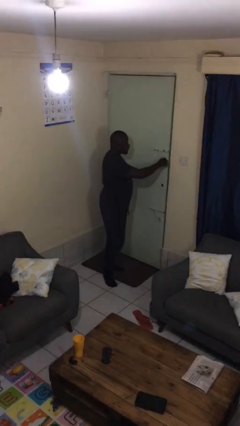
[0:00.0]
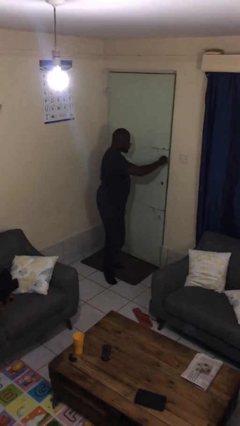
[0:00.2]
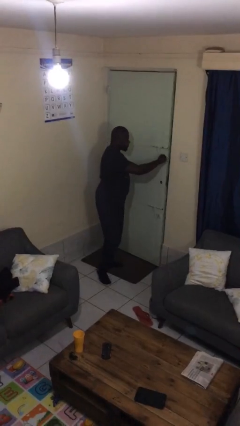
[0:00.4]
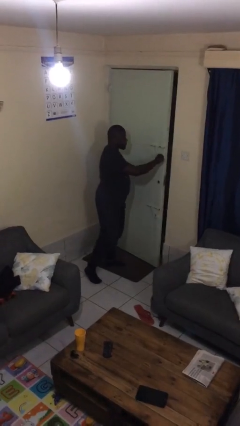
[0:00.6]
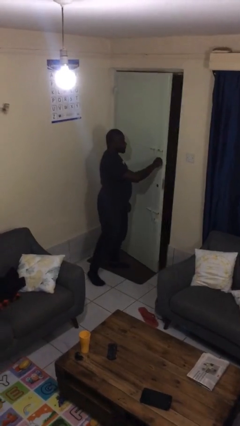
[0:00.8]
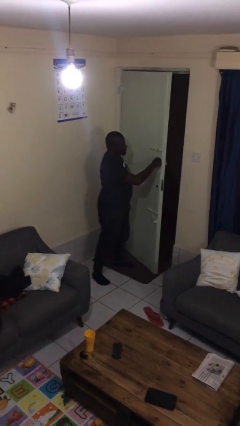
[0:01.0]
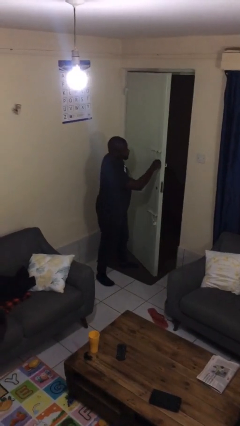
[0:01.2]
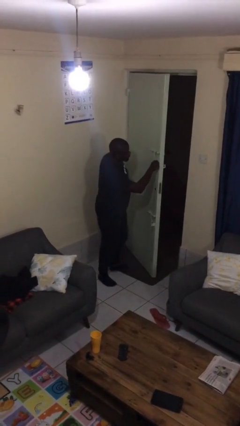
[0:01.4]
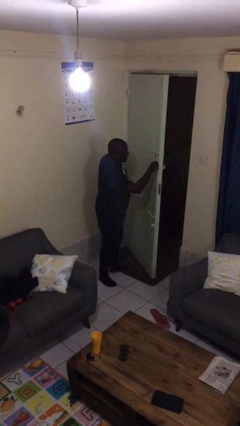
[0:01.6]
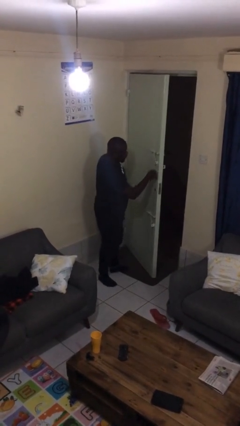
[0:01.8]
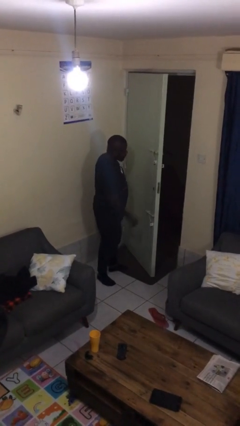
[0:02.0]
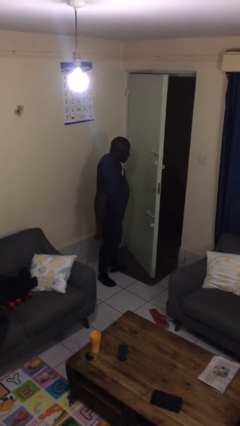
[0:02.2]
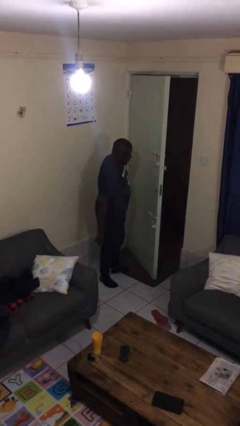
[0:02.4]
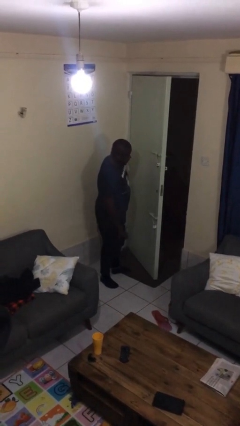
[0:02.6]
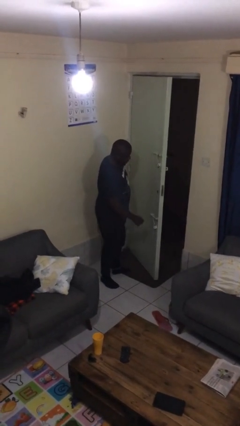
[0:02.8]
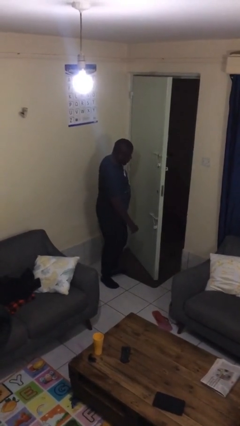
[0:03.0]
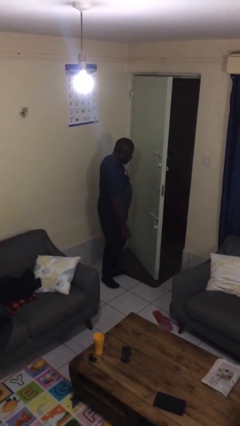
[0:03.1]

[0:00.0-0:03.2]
person opens facility door

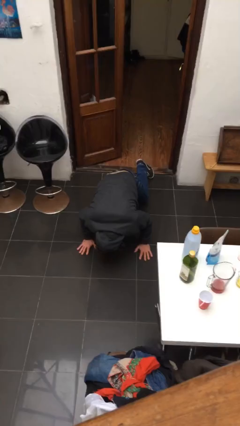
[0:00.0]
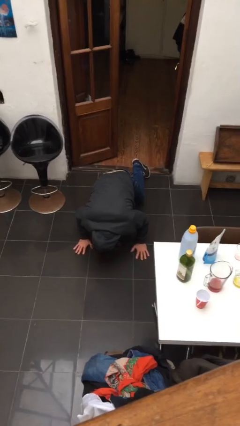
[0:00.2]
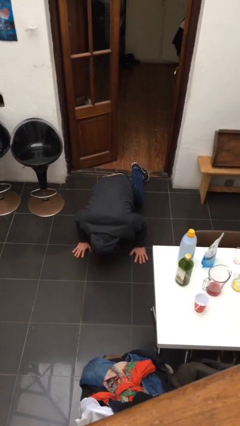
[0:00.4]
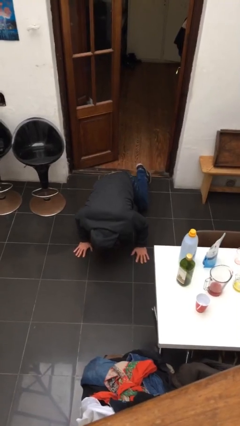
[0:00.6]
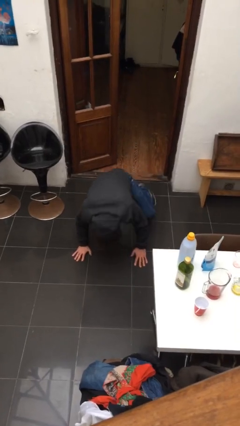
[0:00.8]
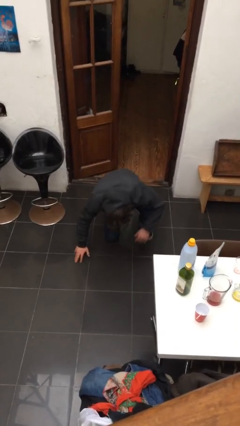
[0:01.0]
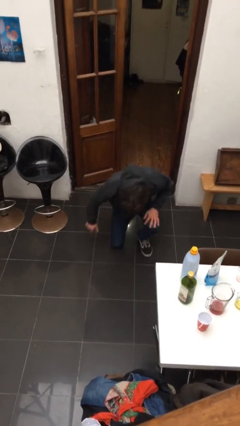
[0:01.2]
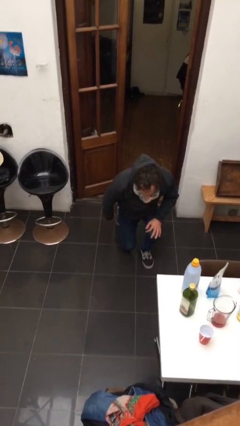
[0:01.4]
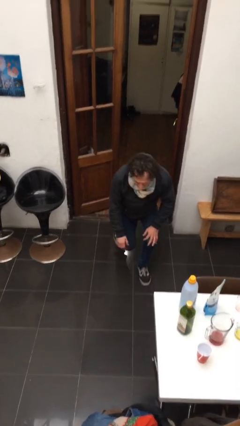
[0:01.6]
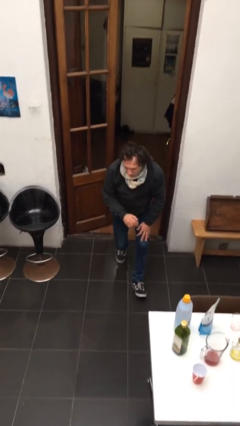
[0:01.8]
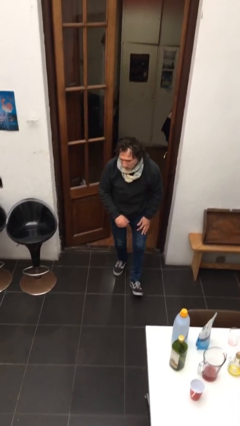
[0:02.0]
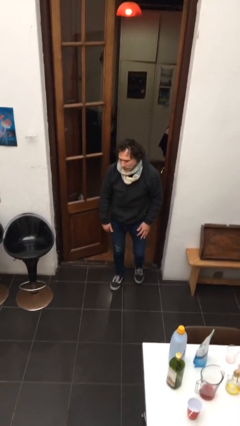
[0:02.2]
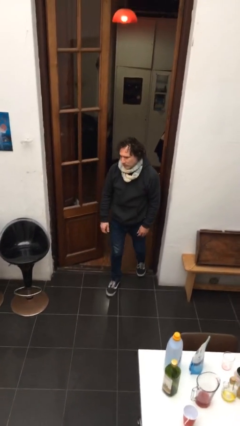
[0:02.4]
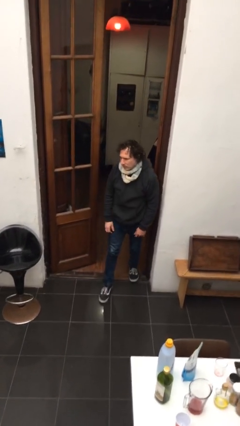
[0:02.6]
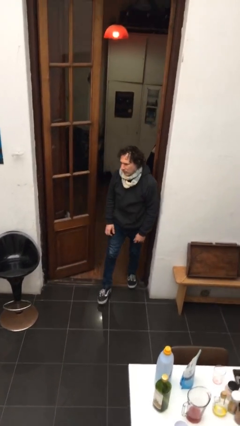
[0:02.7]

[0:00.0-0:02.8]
person stands up from floor

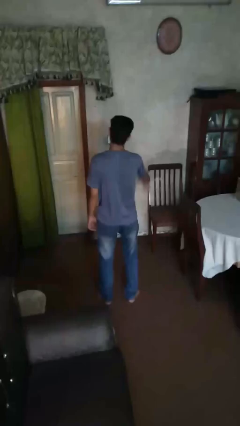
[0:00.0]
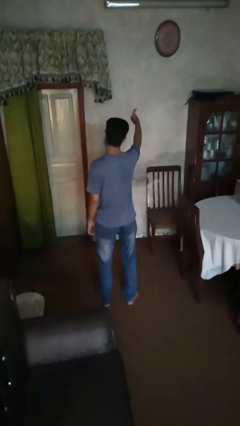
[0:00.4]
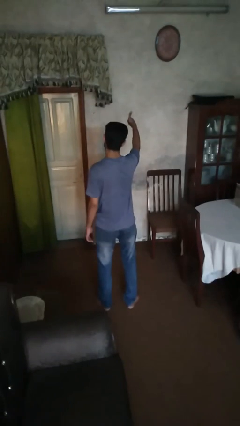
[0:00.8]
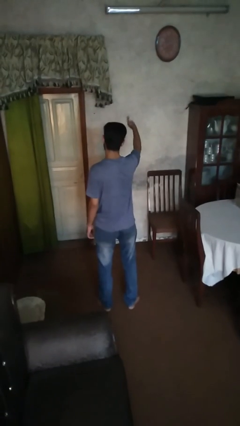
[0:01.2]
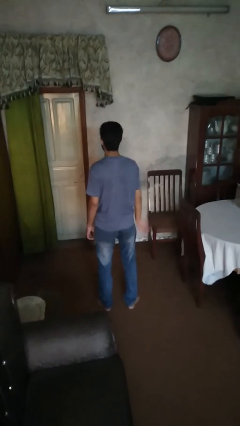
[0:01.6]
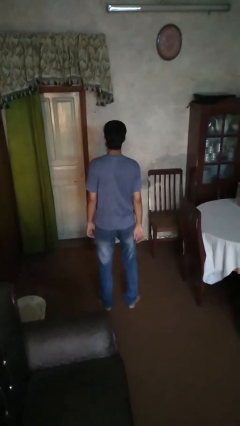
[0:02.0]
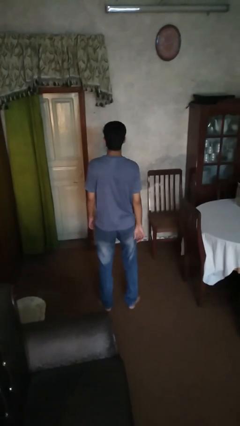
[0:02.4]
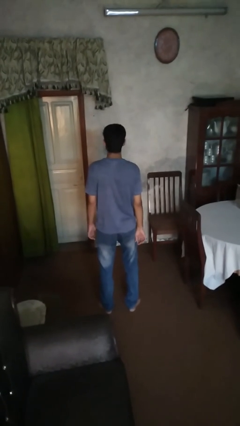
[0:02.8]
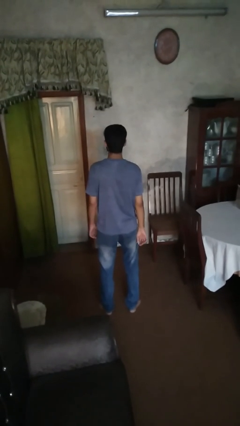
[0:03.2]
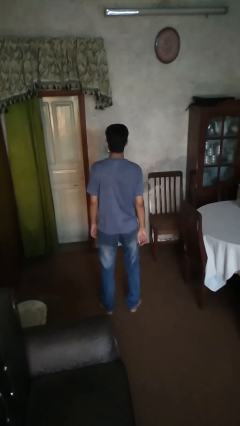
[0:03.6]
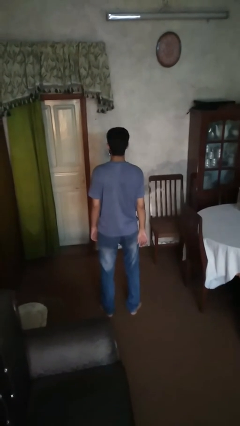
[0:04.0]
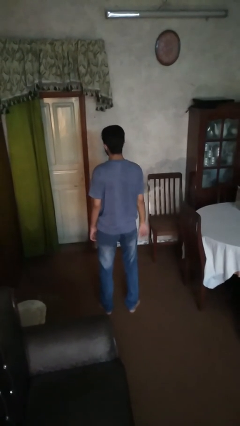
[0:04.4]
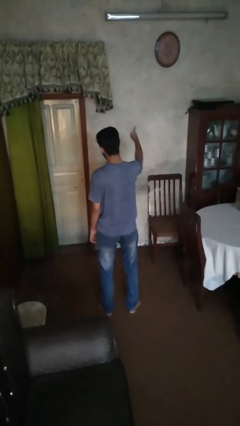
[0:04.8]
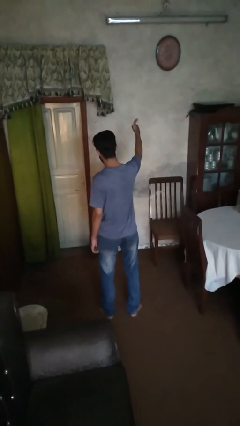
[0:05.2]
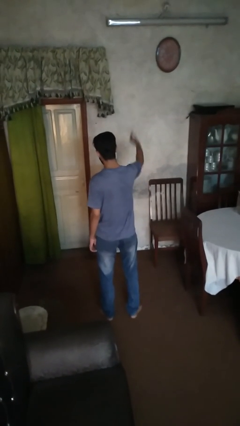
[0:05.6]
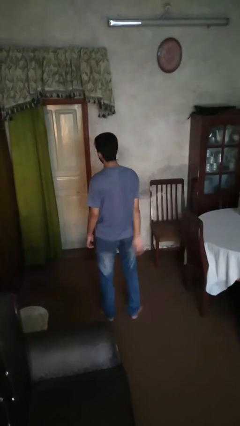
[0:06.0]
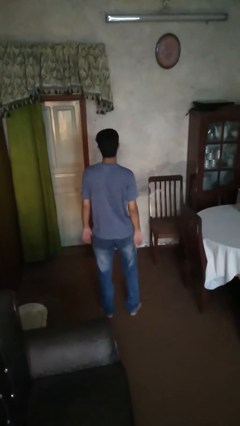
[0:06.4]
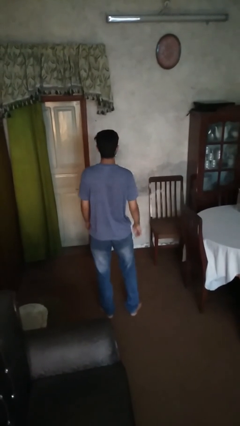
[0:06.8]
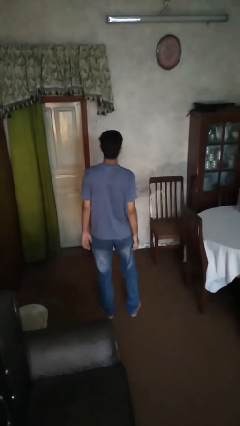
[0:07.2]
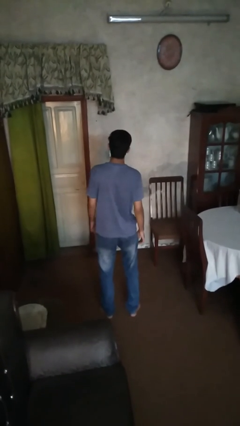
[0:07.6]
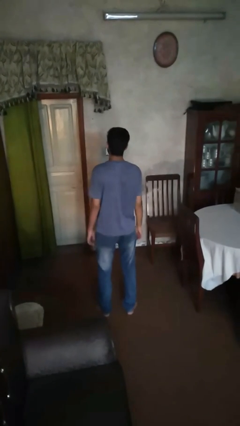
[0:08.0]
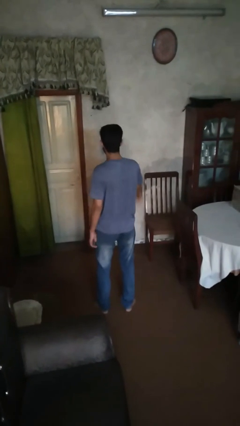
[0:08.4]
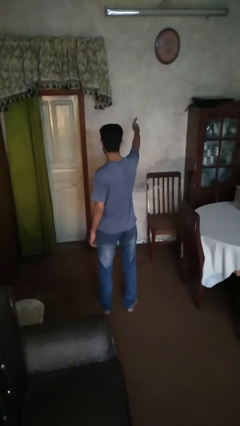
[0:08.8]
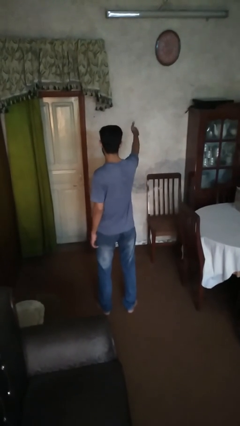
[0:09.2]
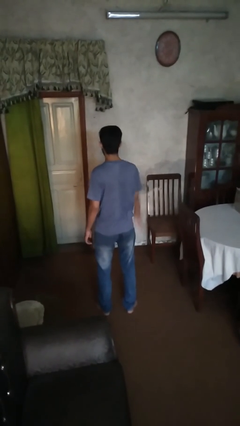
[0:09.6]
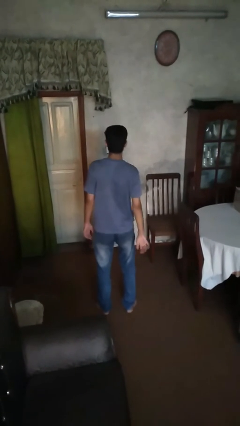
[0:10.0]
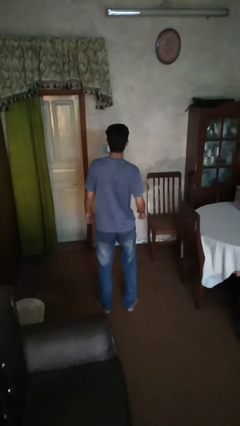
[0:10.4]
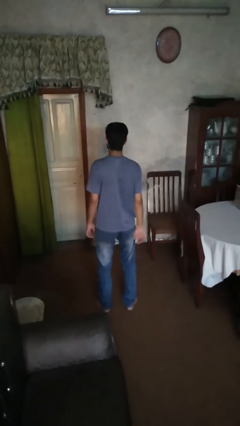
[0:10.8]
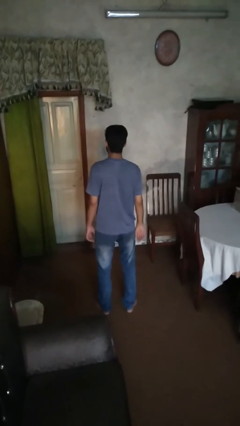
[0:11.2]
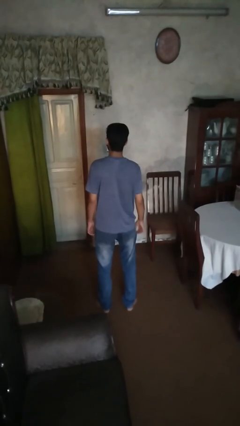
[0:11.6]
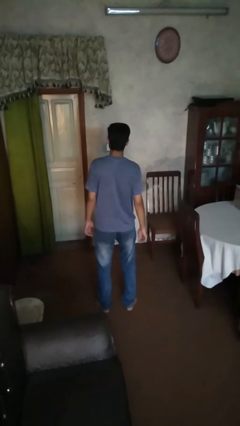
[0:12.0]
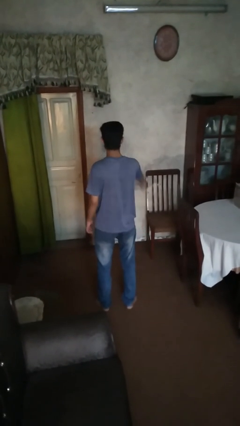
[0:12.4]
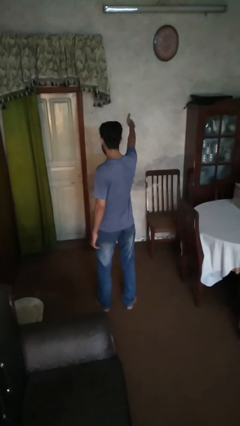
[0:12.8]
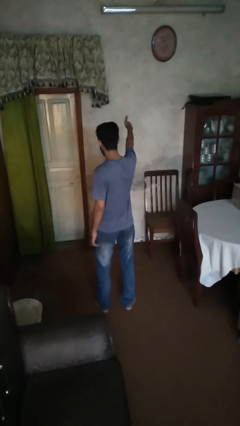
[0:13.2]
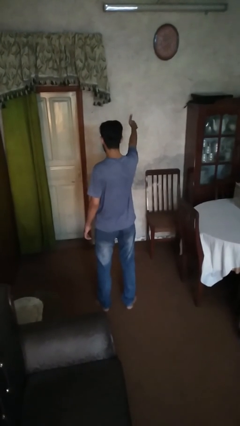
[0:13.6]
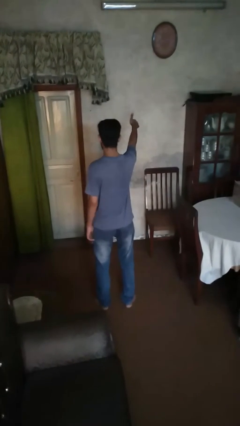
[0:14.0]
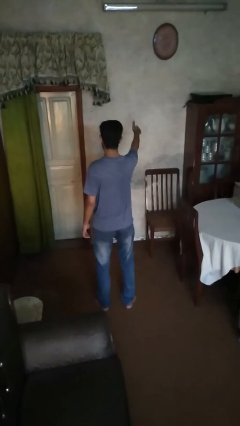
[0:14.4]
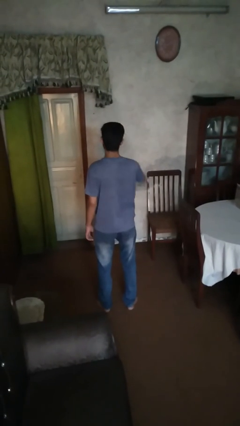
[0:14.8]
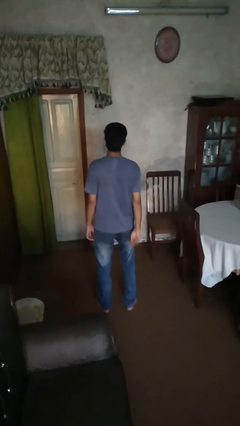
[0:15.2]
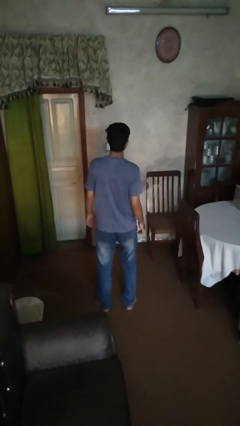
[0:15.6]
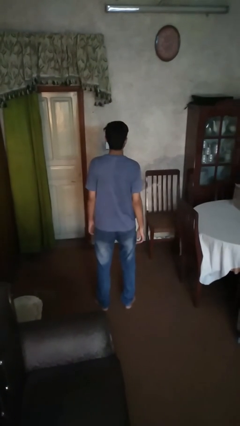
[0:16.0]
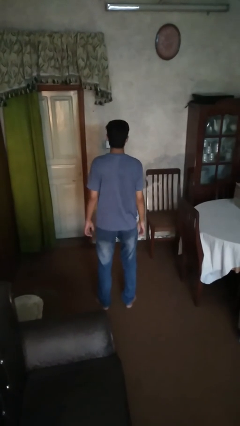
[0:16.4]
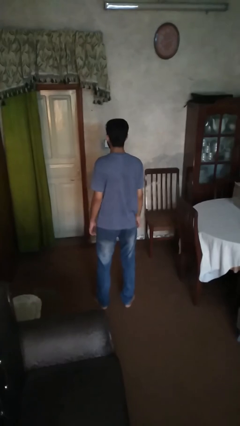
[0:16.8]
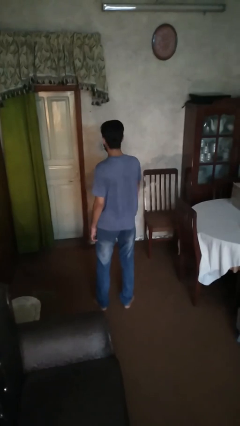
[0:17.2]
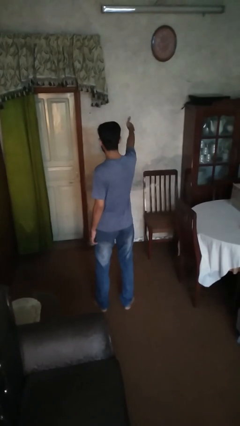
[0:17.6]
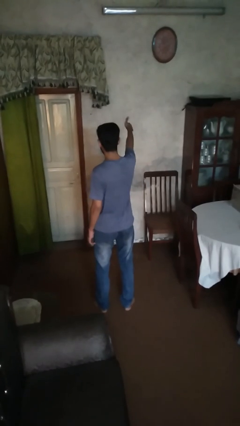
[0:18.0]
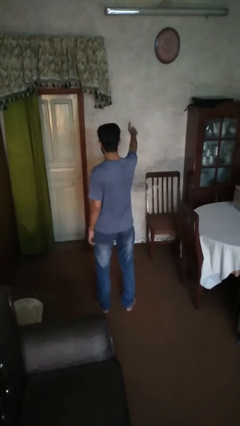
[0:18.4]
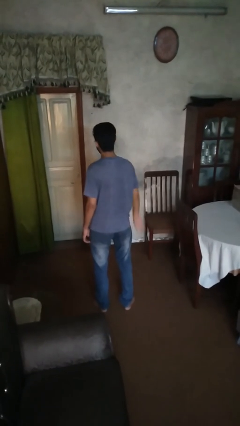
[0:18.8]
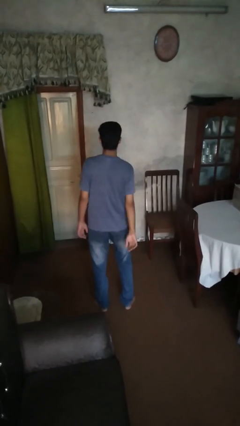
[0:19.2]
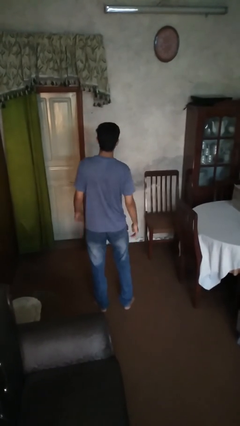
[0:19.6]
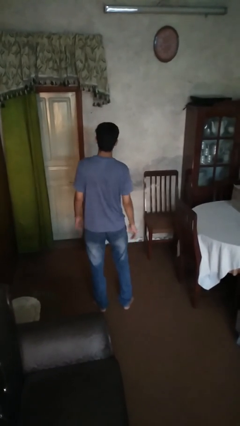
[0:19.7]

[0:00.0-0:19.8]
person gestures thumbs up

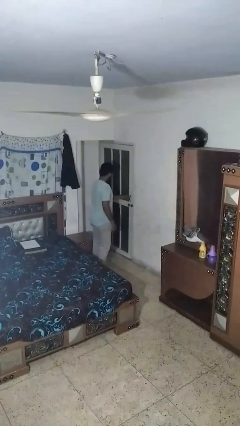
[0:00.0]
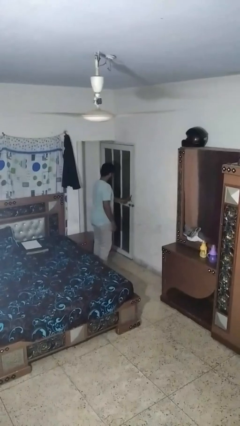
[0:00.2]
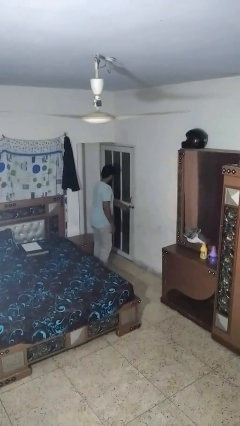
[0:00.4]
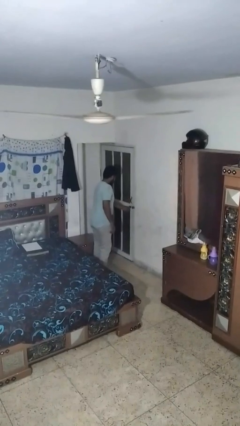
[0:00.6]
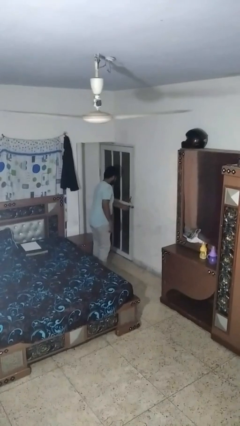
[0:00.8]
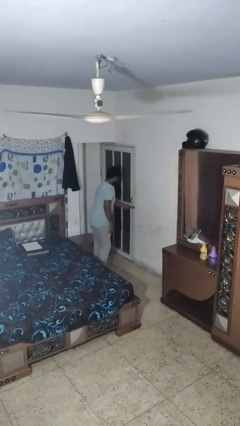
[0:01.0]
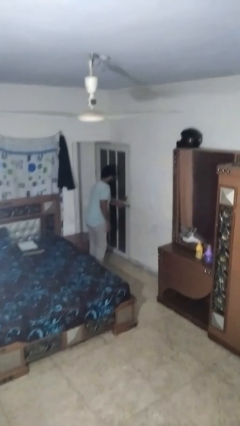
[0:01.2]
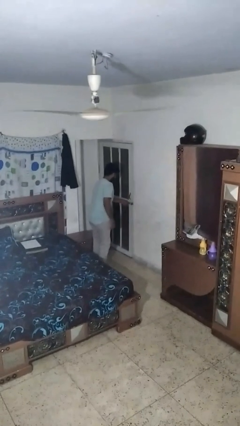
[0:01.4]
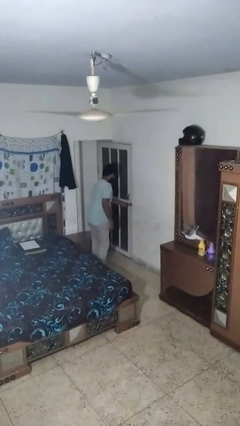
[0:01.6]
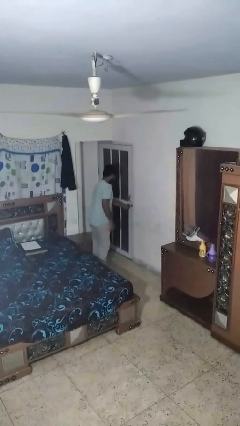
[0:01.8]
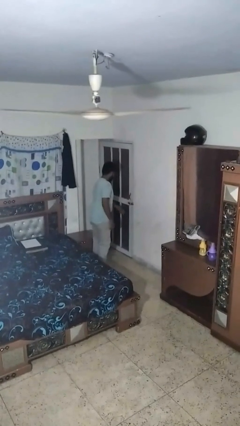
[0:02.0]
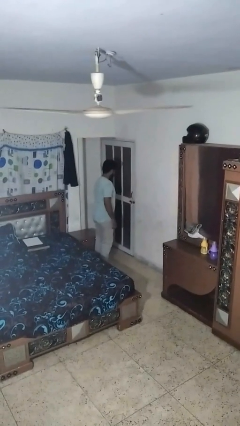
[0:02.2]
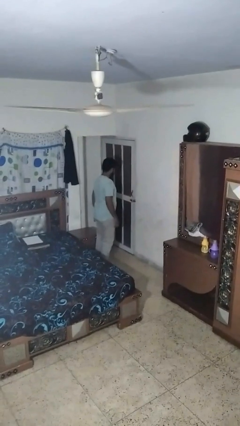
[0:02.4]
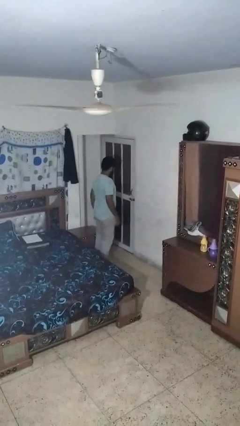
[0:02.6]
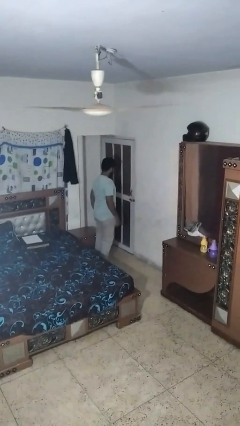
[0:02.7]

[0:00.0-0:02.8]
person locks door with keys
